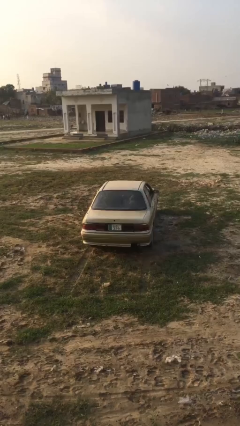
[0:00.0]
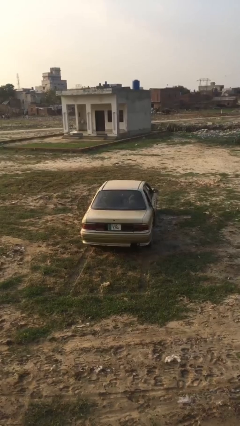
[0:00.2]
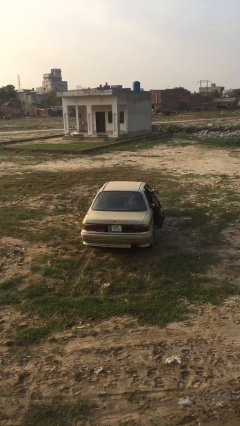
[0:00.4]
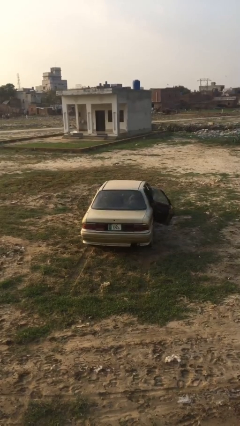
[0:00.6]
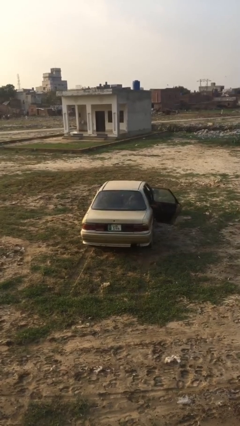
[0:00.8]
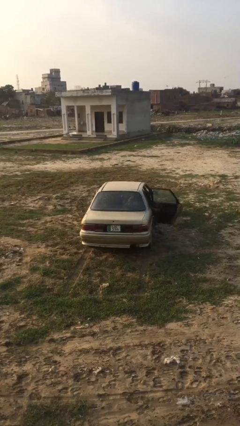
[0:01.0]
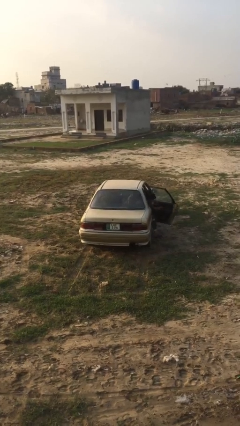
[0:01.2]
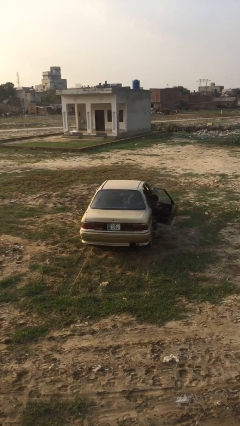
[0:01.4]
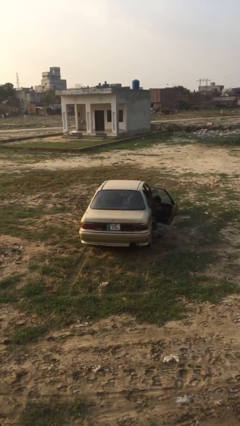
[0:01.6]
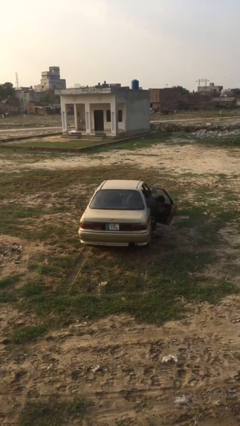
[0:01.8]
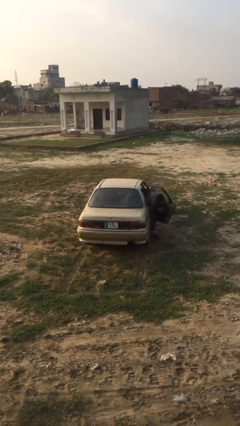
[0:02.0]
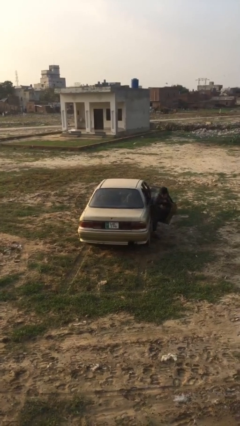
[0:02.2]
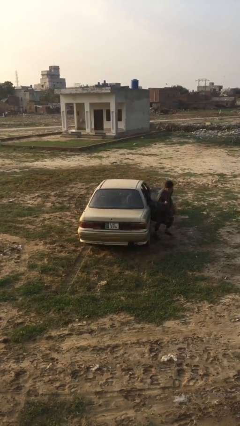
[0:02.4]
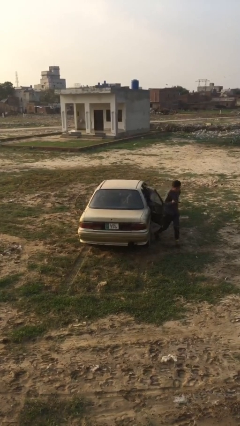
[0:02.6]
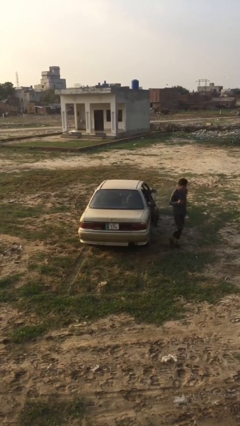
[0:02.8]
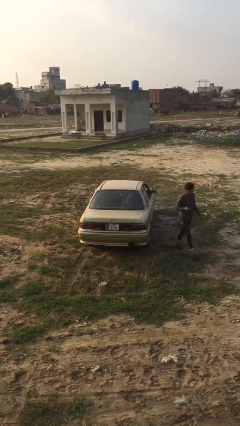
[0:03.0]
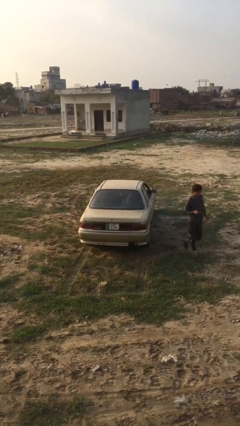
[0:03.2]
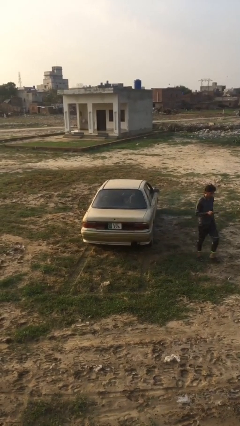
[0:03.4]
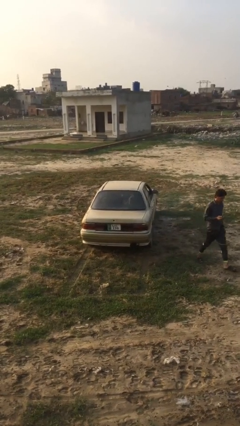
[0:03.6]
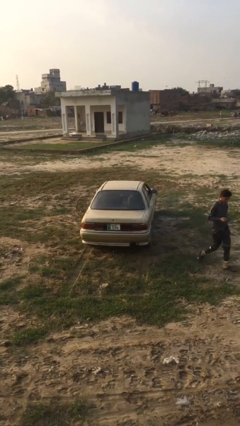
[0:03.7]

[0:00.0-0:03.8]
car drops off person

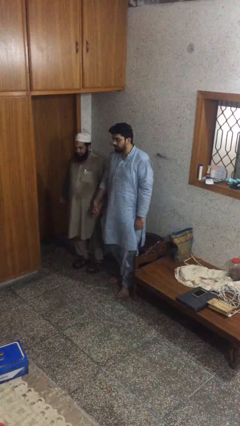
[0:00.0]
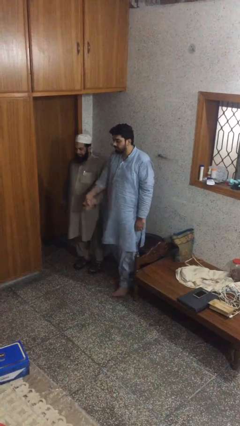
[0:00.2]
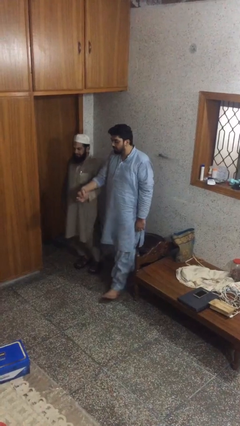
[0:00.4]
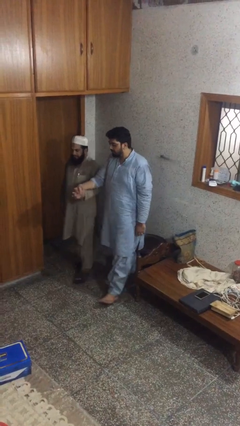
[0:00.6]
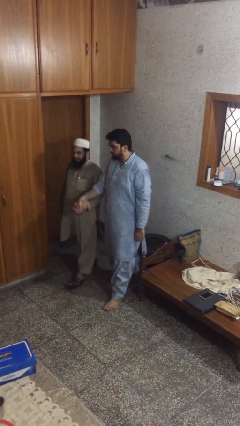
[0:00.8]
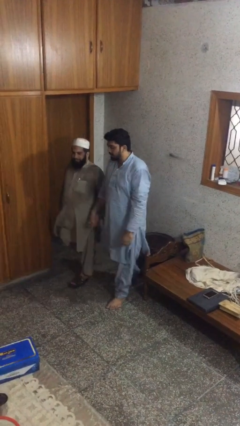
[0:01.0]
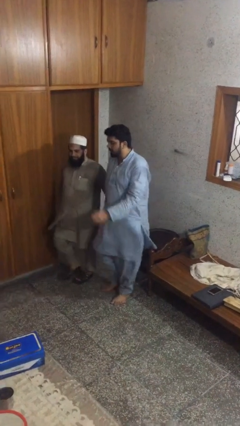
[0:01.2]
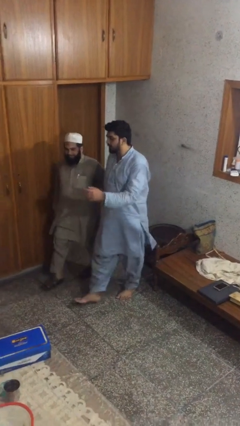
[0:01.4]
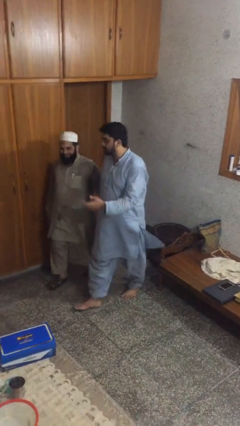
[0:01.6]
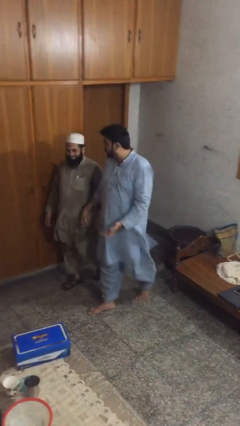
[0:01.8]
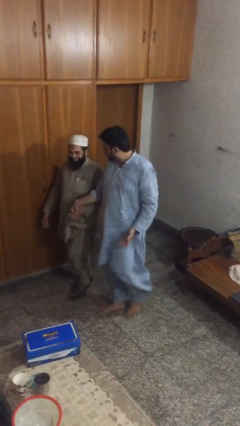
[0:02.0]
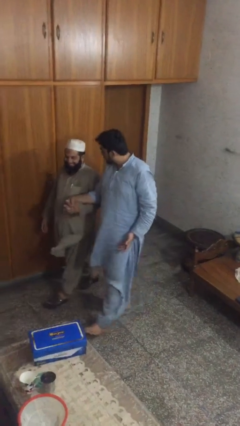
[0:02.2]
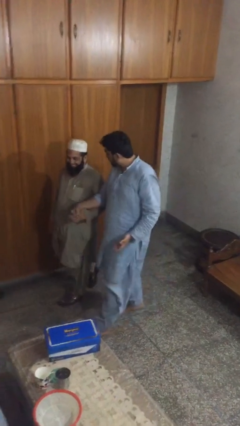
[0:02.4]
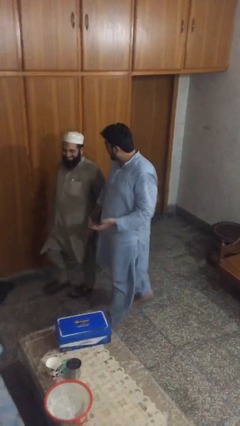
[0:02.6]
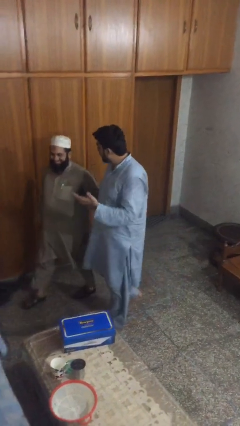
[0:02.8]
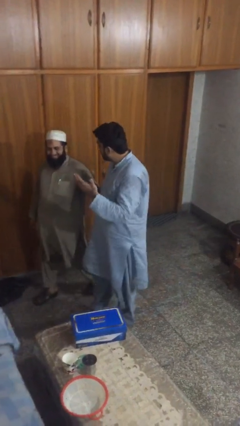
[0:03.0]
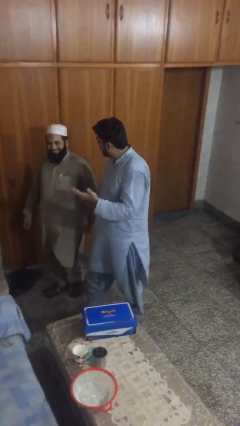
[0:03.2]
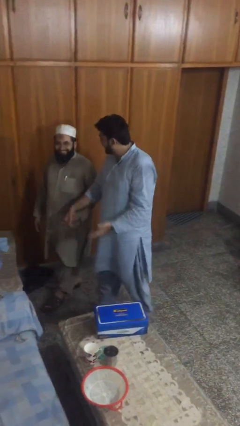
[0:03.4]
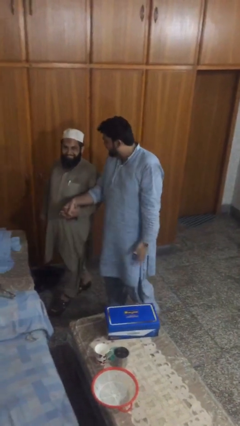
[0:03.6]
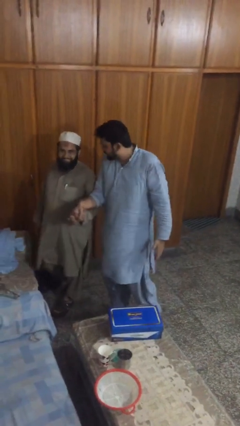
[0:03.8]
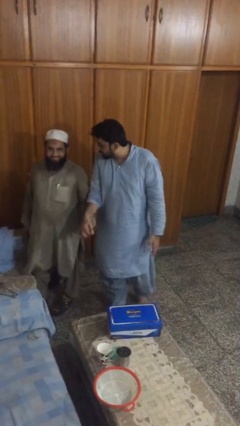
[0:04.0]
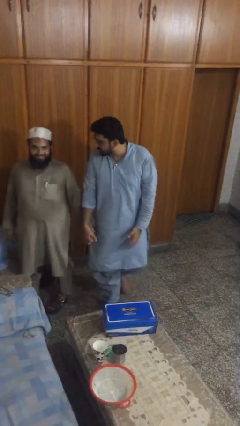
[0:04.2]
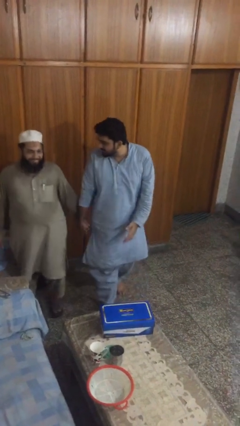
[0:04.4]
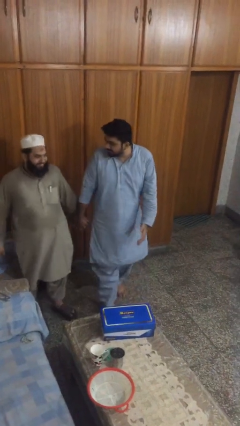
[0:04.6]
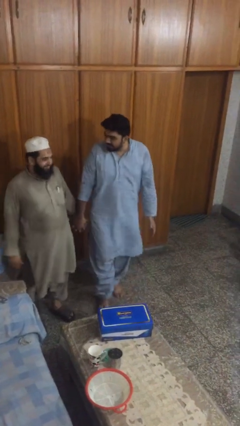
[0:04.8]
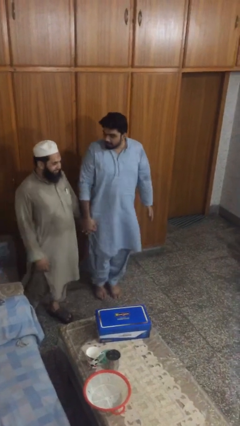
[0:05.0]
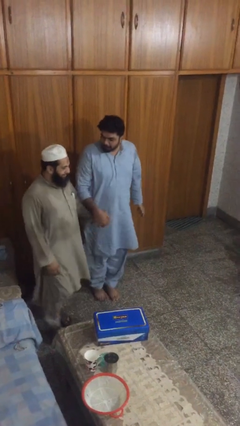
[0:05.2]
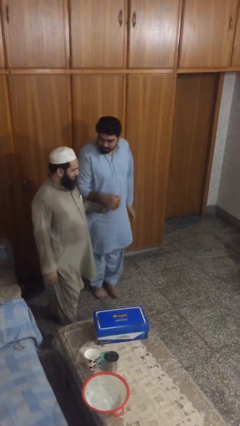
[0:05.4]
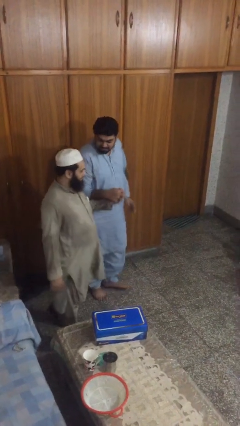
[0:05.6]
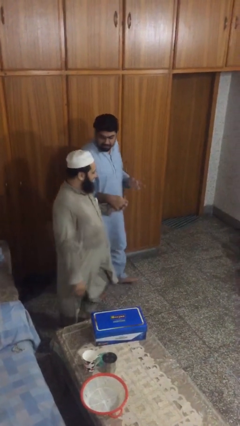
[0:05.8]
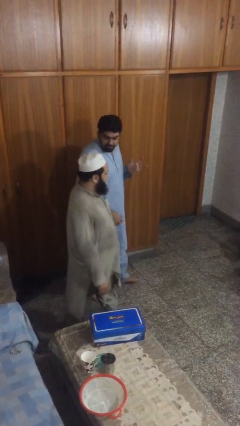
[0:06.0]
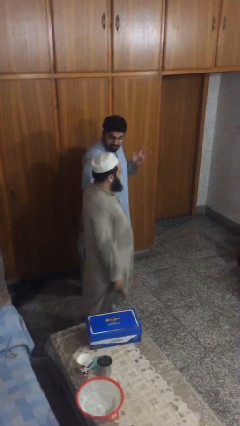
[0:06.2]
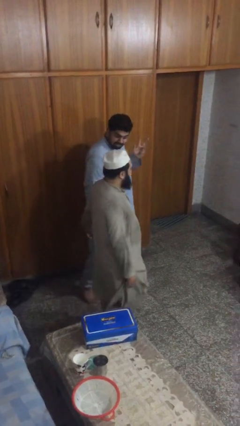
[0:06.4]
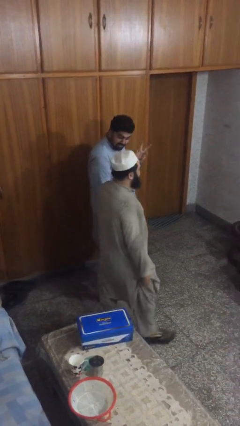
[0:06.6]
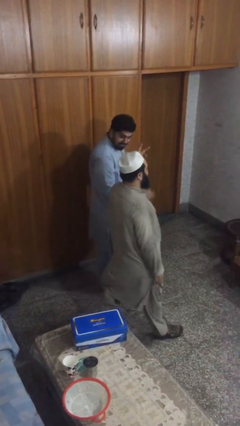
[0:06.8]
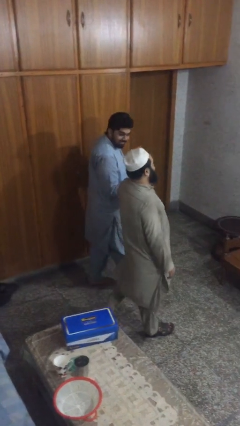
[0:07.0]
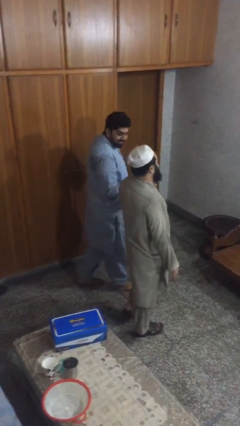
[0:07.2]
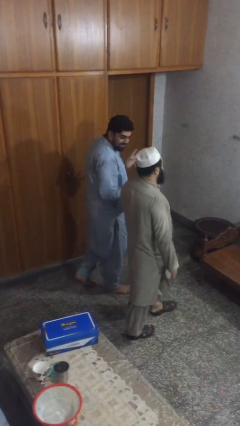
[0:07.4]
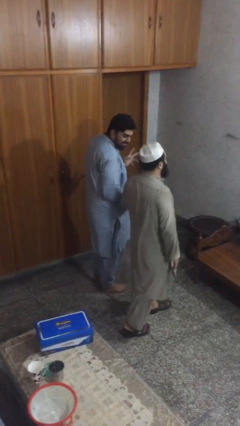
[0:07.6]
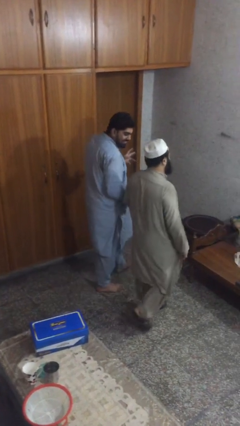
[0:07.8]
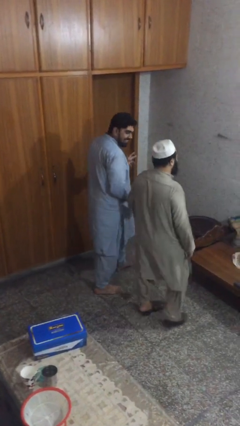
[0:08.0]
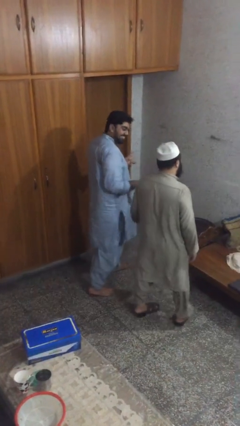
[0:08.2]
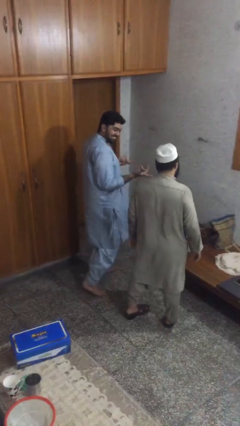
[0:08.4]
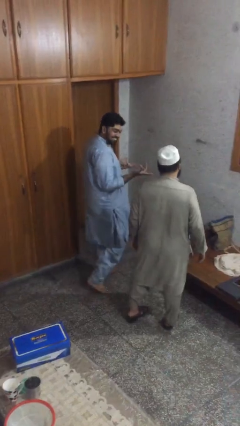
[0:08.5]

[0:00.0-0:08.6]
person holds hand

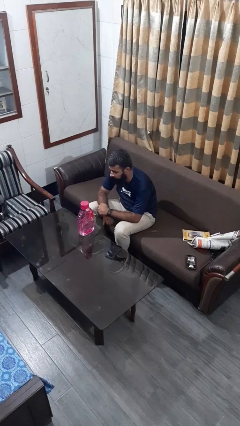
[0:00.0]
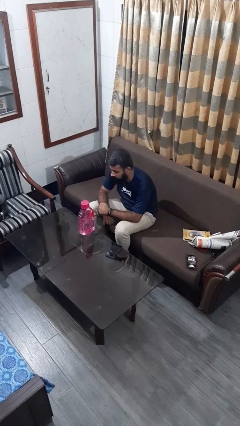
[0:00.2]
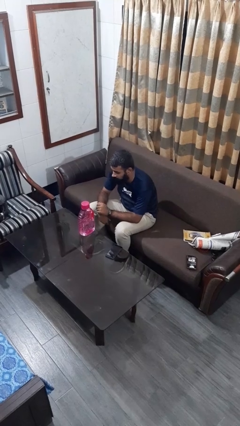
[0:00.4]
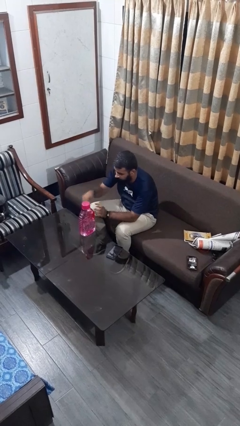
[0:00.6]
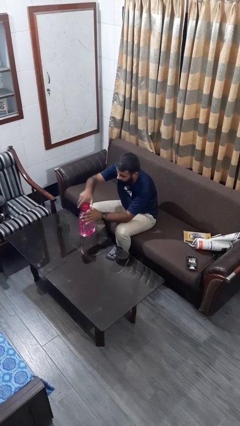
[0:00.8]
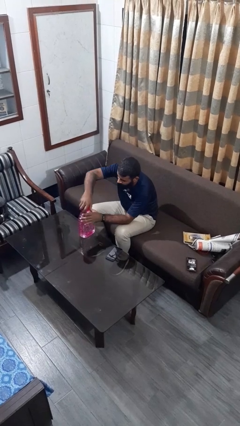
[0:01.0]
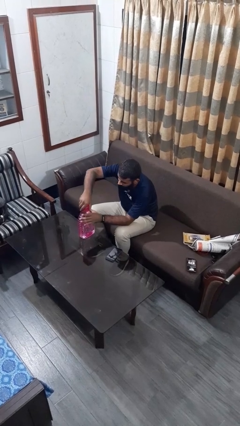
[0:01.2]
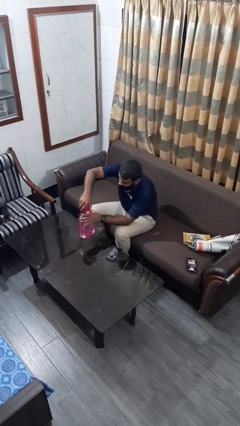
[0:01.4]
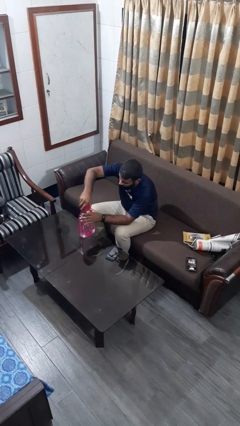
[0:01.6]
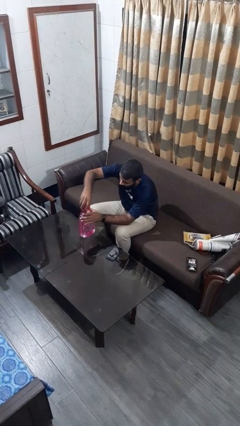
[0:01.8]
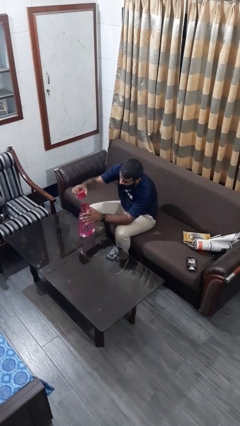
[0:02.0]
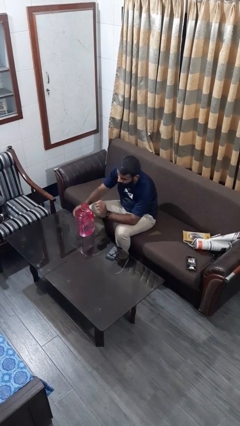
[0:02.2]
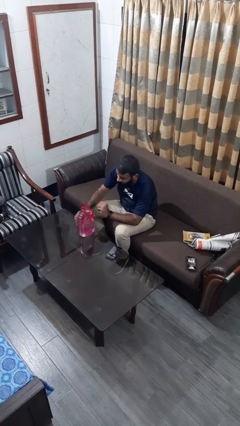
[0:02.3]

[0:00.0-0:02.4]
person unscrews lid from bottle

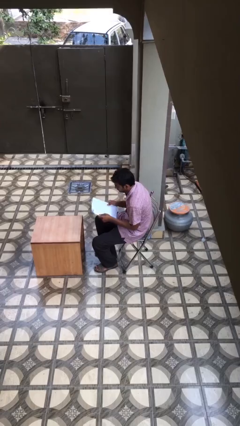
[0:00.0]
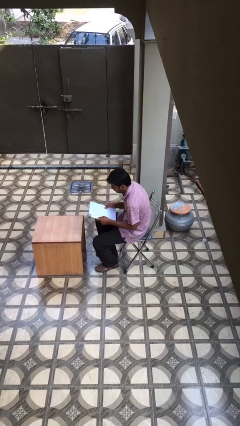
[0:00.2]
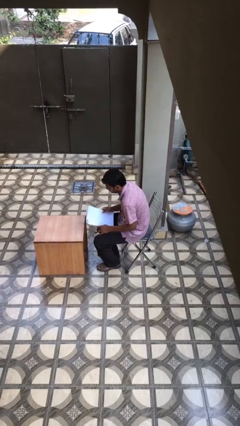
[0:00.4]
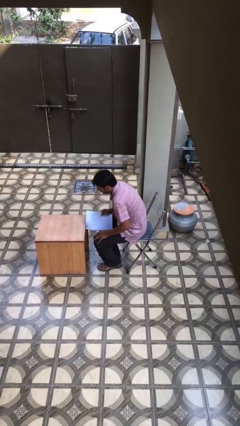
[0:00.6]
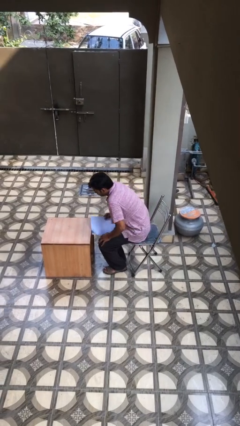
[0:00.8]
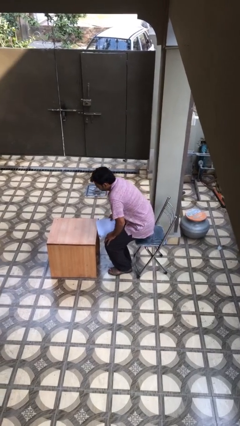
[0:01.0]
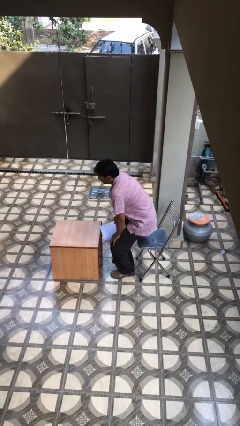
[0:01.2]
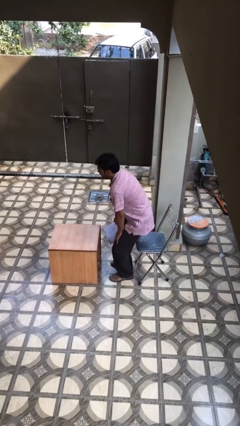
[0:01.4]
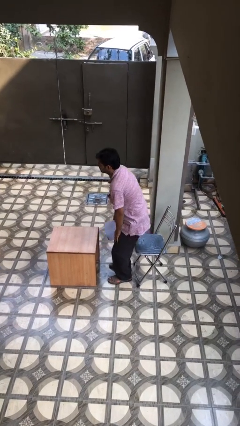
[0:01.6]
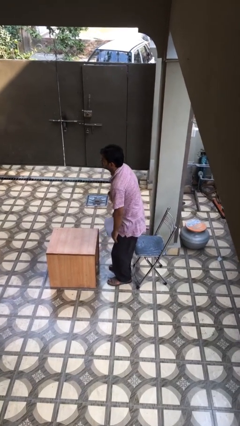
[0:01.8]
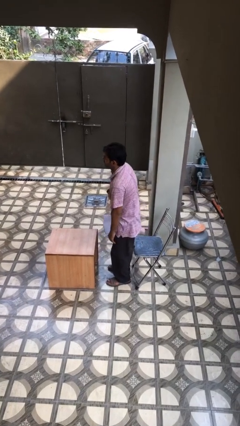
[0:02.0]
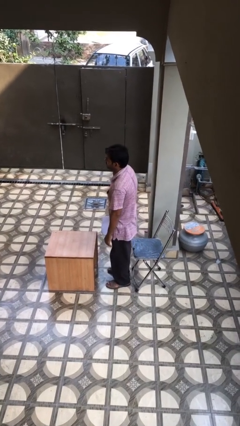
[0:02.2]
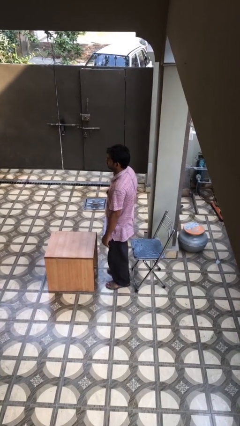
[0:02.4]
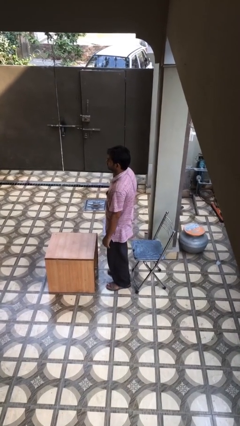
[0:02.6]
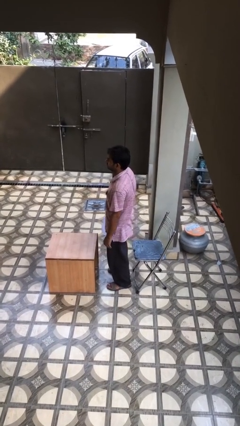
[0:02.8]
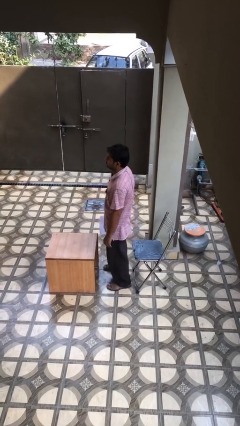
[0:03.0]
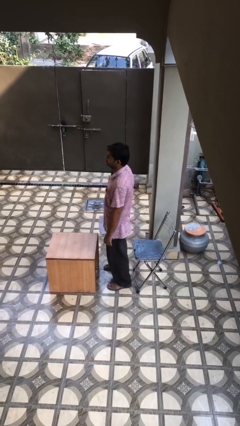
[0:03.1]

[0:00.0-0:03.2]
person stands up
